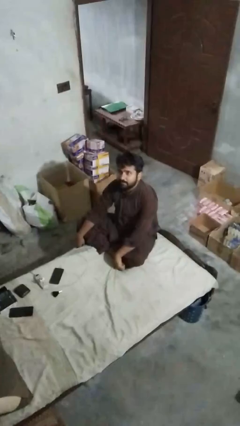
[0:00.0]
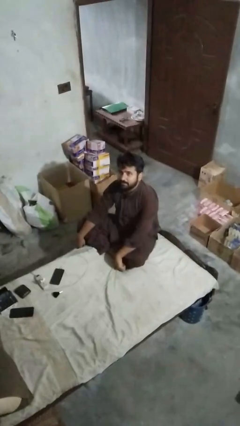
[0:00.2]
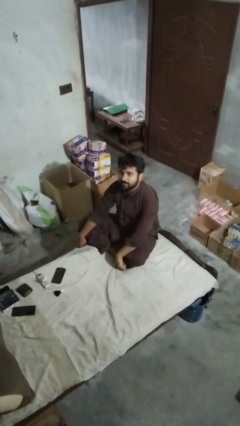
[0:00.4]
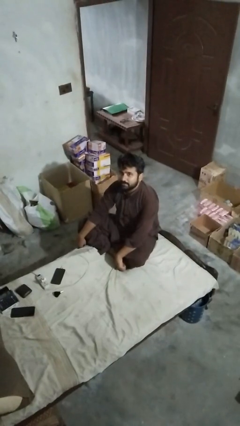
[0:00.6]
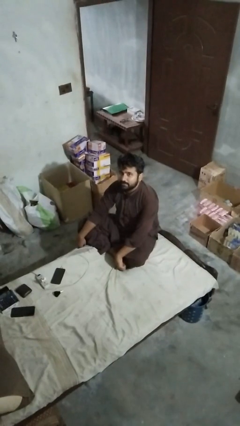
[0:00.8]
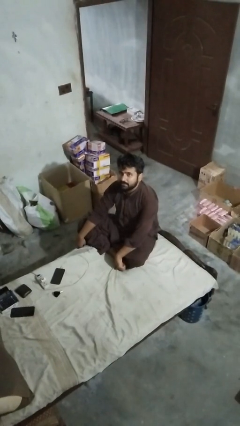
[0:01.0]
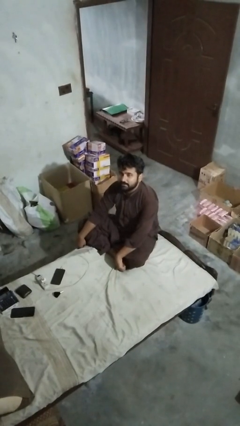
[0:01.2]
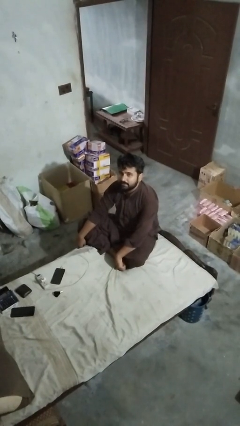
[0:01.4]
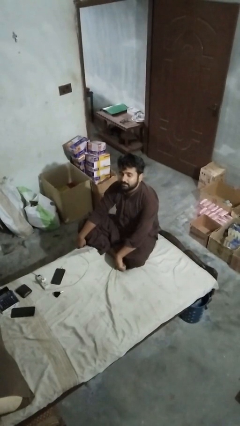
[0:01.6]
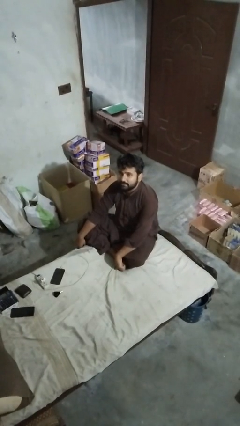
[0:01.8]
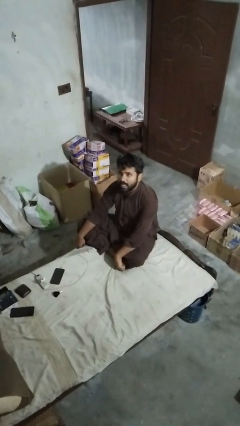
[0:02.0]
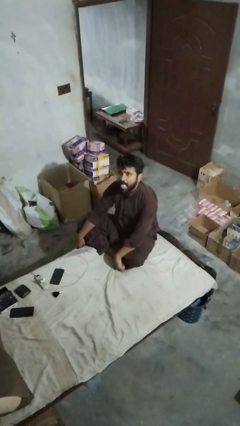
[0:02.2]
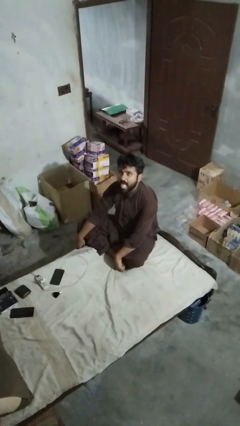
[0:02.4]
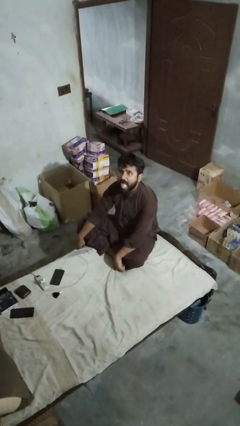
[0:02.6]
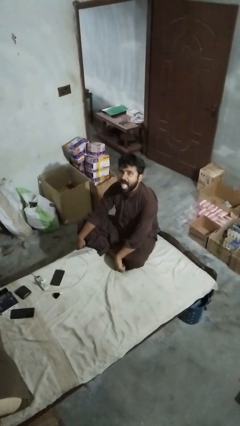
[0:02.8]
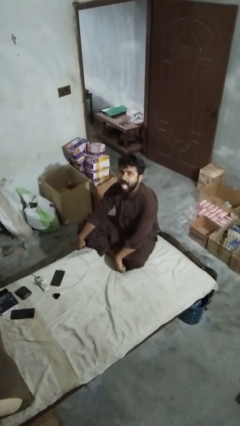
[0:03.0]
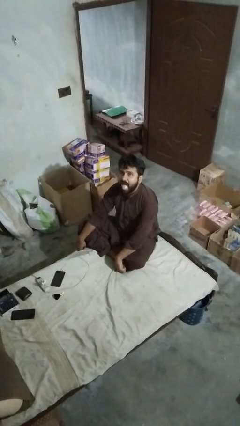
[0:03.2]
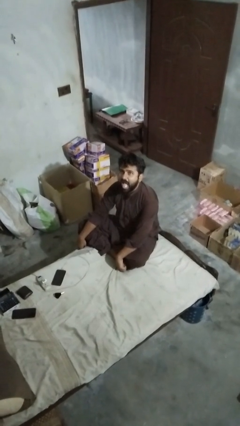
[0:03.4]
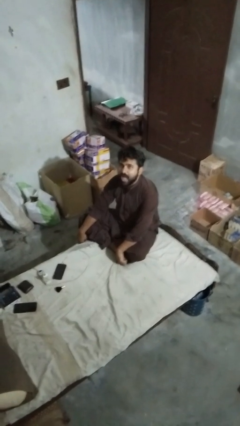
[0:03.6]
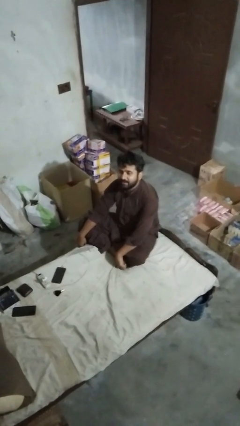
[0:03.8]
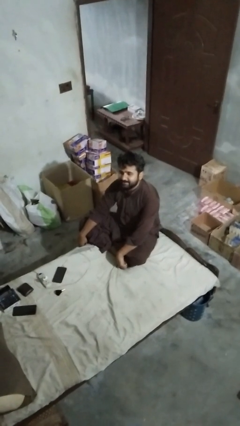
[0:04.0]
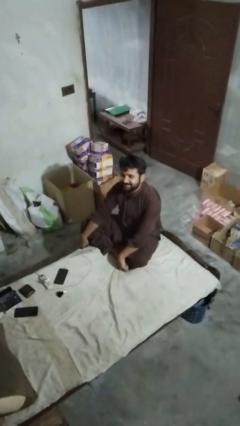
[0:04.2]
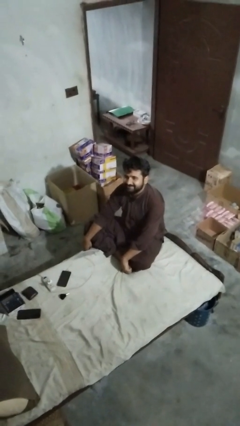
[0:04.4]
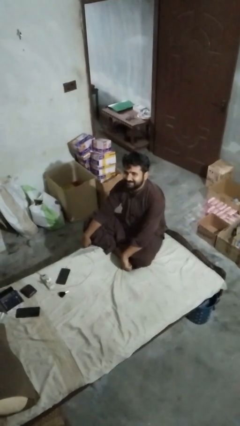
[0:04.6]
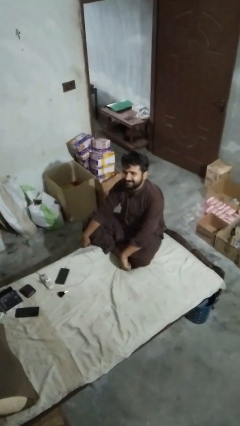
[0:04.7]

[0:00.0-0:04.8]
person sticks out tongue

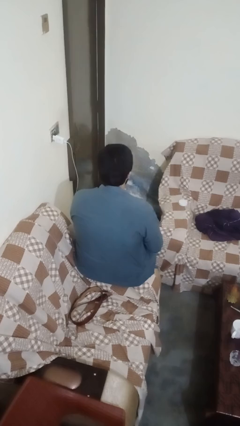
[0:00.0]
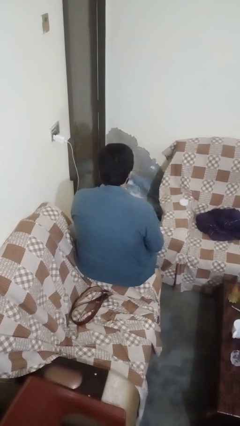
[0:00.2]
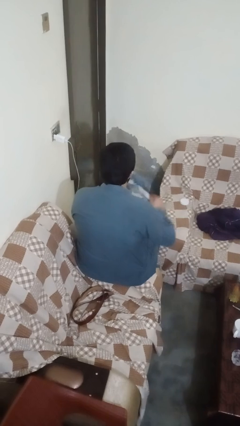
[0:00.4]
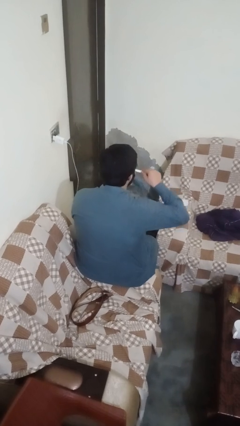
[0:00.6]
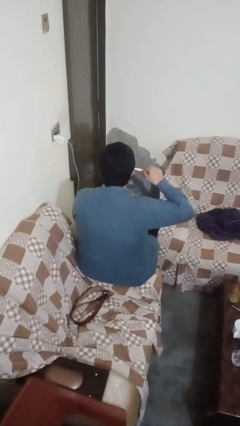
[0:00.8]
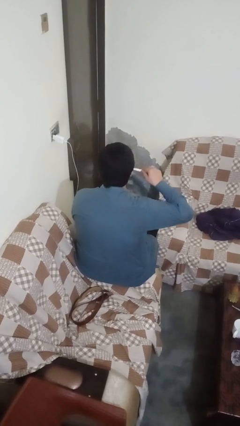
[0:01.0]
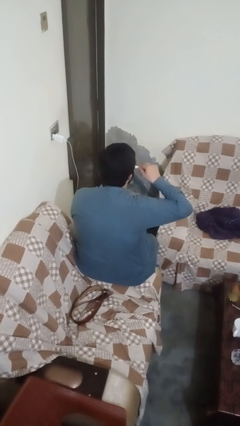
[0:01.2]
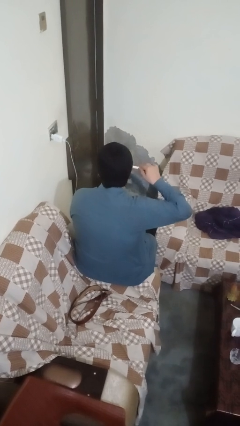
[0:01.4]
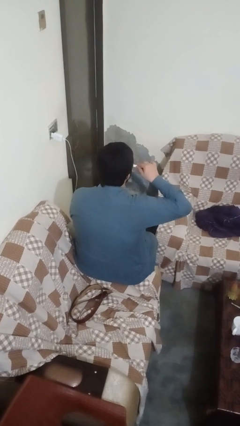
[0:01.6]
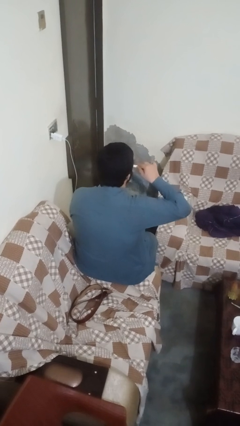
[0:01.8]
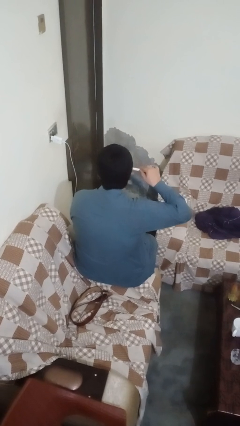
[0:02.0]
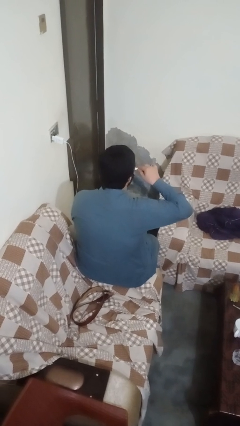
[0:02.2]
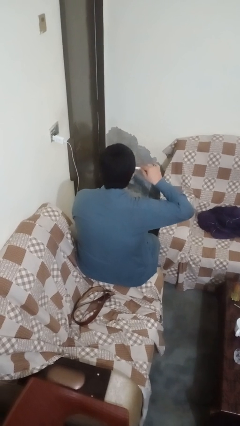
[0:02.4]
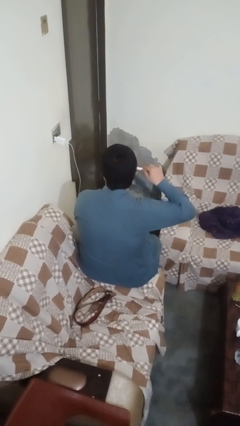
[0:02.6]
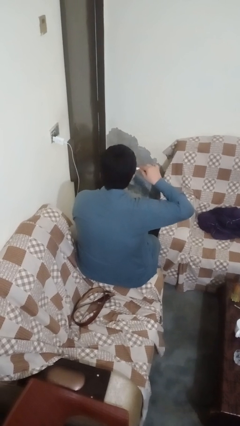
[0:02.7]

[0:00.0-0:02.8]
person brushes teeth

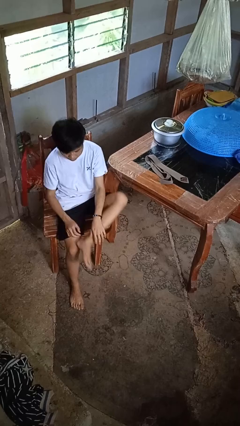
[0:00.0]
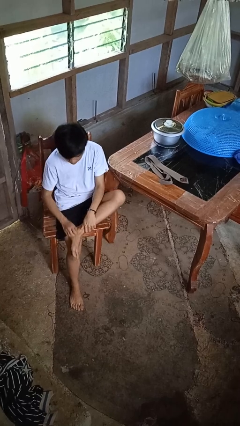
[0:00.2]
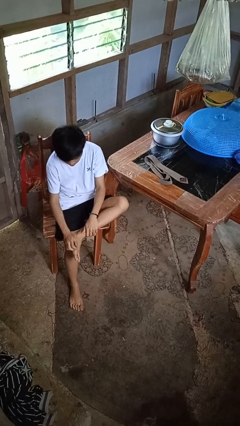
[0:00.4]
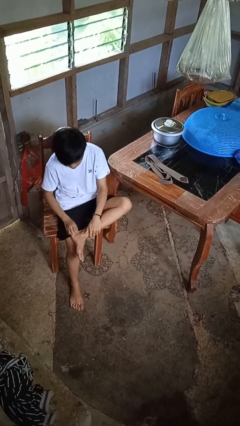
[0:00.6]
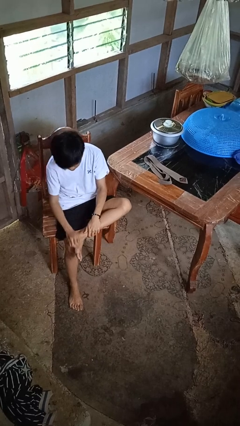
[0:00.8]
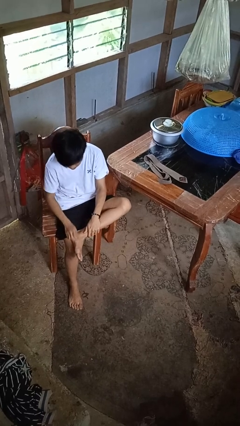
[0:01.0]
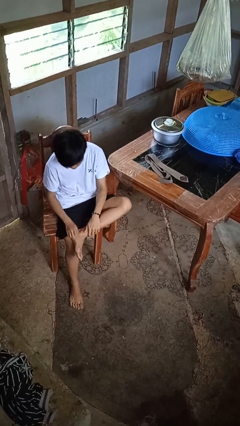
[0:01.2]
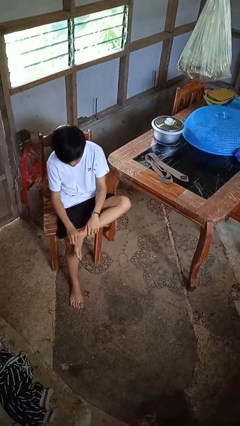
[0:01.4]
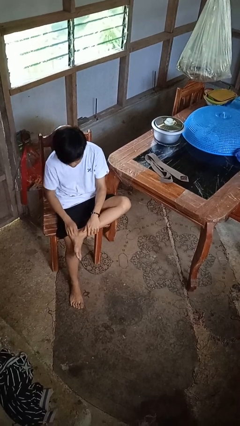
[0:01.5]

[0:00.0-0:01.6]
person rubs foot

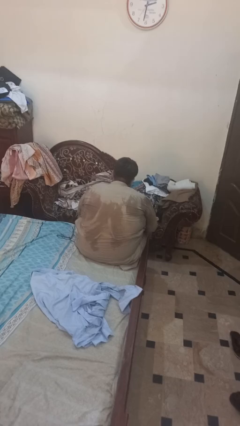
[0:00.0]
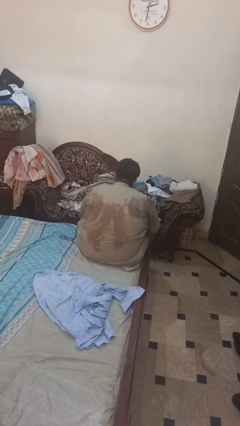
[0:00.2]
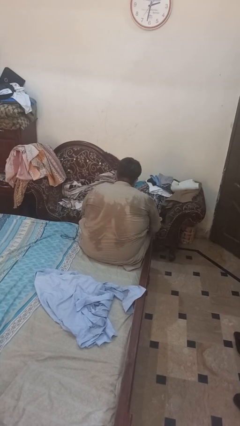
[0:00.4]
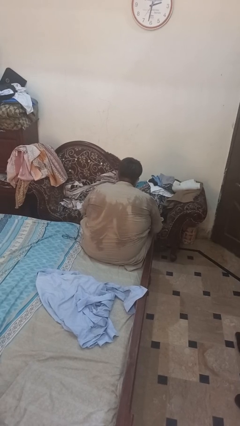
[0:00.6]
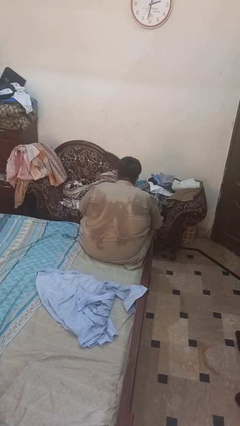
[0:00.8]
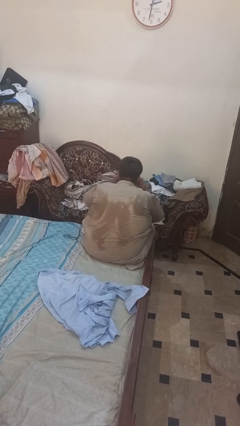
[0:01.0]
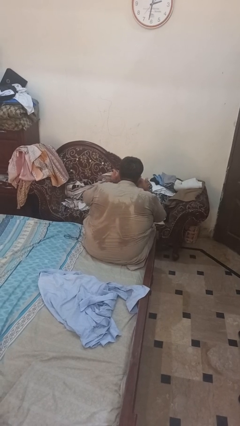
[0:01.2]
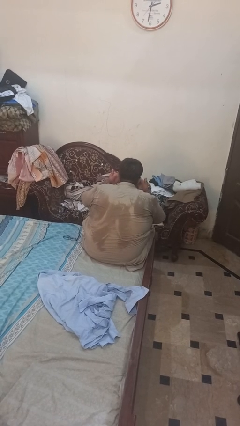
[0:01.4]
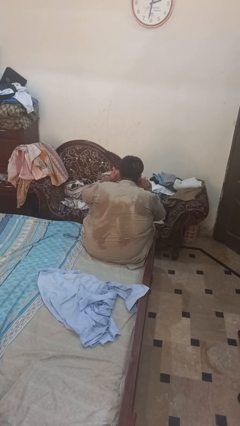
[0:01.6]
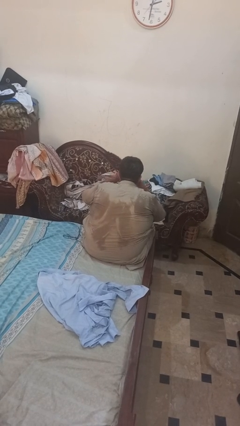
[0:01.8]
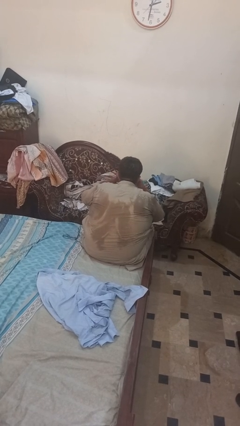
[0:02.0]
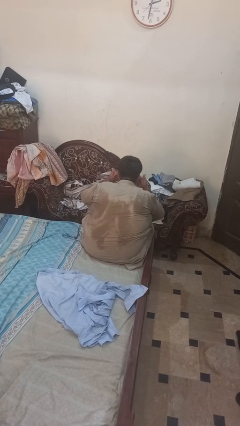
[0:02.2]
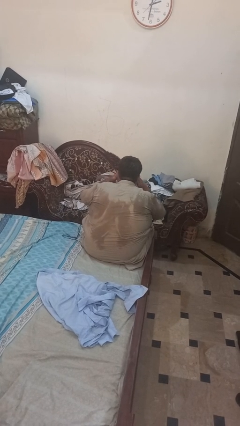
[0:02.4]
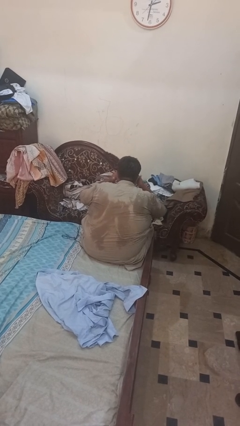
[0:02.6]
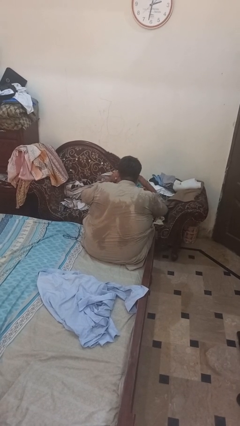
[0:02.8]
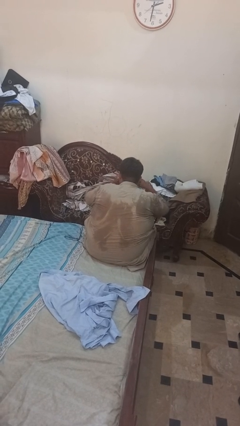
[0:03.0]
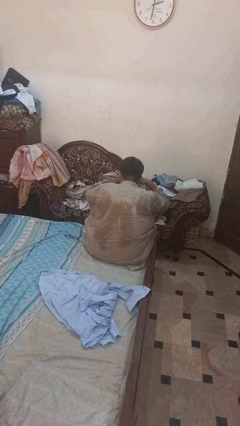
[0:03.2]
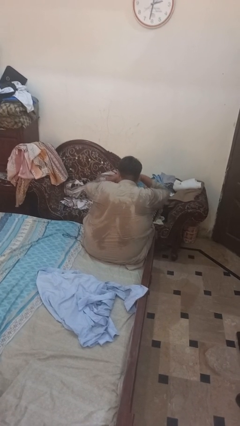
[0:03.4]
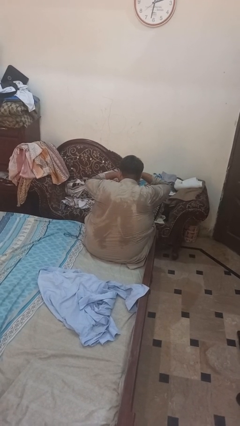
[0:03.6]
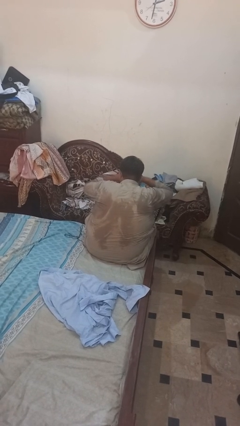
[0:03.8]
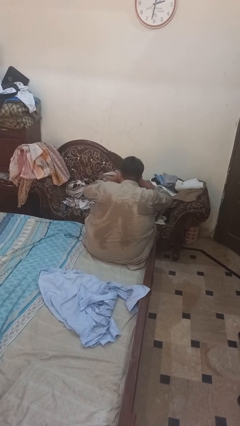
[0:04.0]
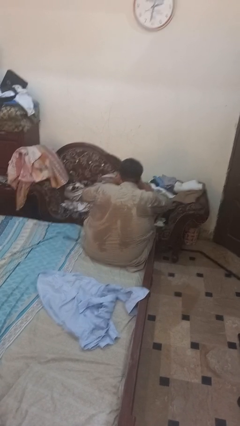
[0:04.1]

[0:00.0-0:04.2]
person rubs eyes

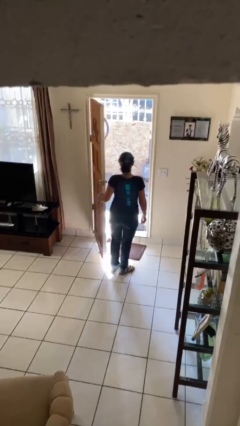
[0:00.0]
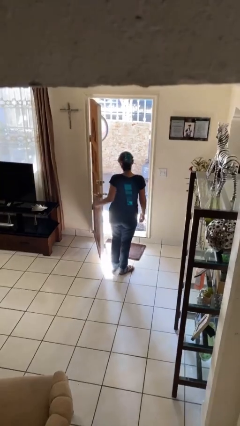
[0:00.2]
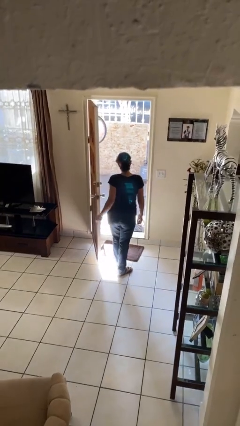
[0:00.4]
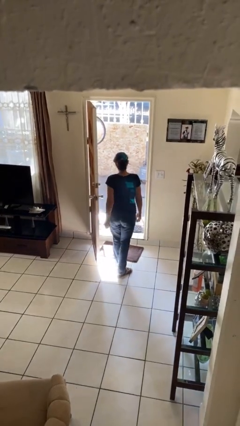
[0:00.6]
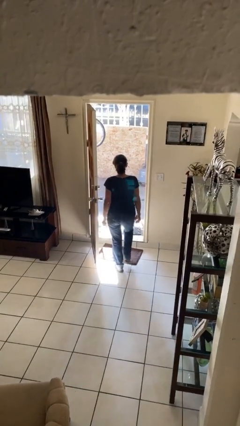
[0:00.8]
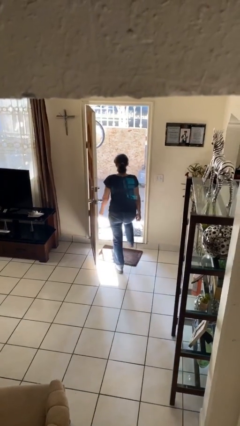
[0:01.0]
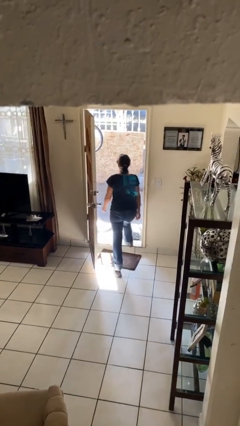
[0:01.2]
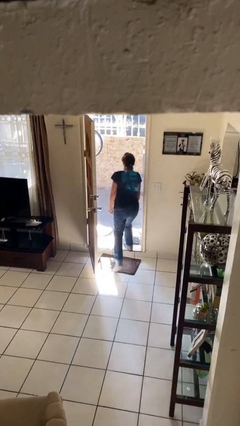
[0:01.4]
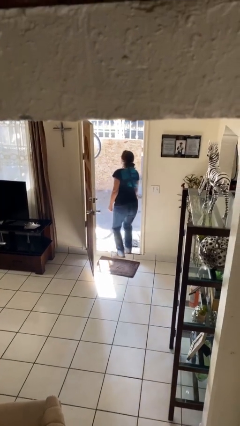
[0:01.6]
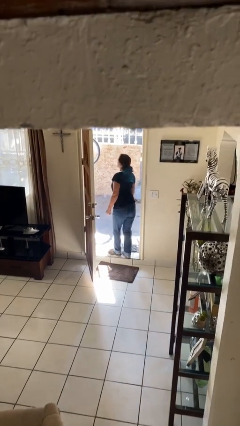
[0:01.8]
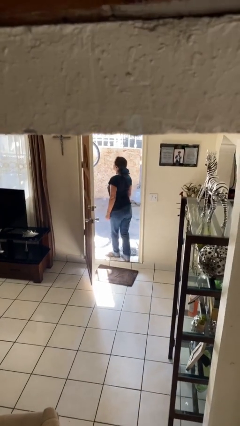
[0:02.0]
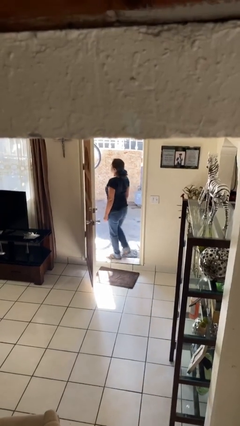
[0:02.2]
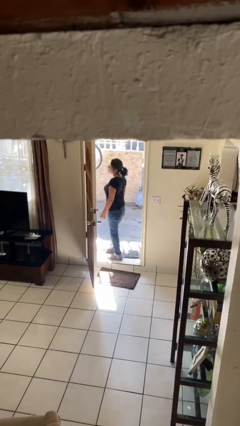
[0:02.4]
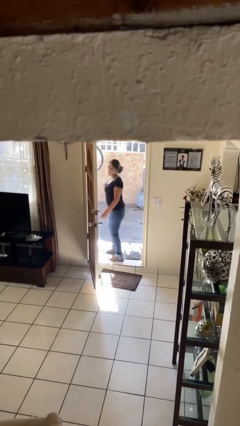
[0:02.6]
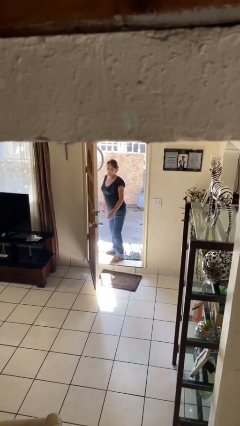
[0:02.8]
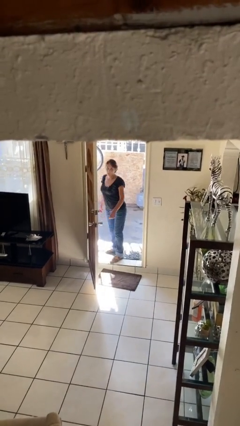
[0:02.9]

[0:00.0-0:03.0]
person exits scene through structure

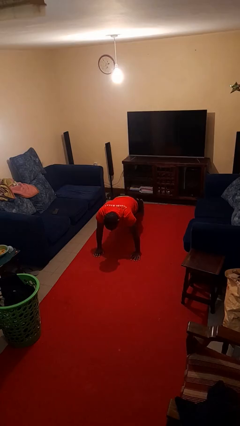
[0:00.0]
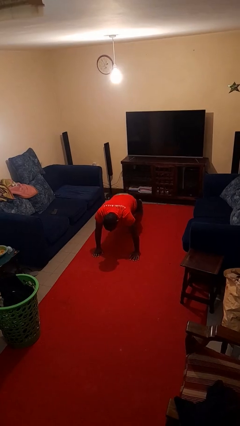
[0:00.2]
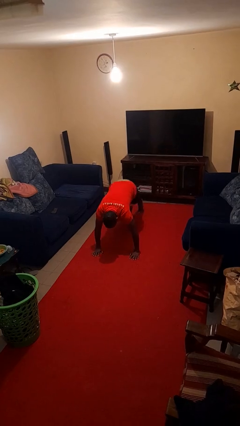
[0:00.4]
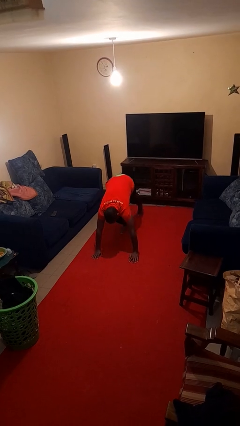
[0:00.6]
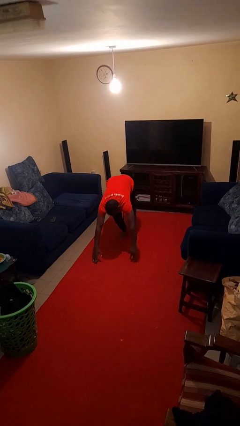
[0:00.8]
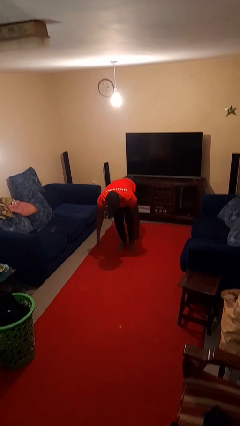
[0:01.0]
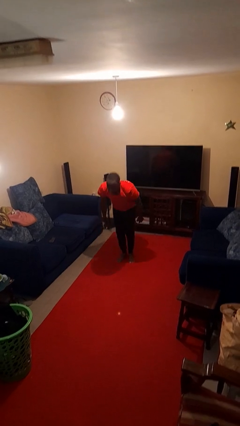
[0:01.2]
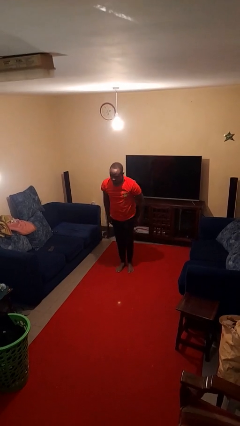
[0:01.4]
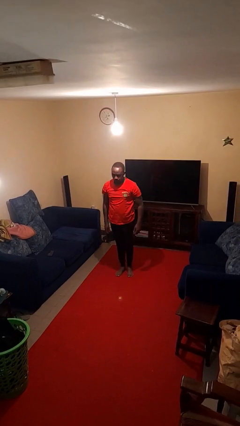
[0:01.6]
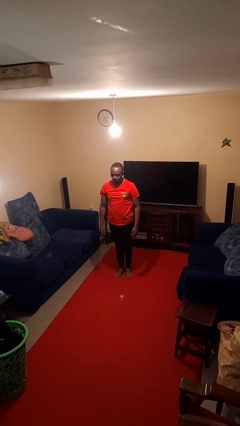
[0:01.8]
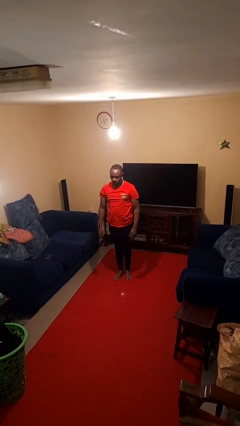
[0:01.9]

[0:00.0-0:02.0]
person stands up from floor
